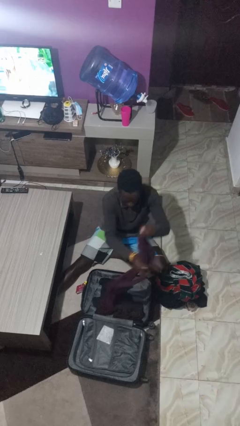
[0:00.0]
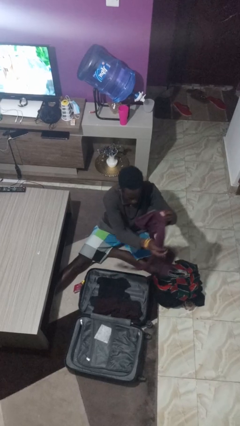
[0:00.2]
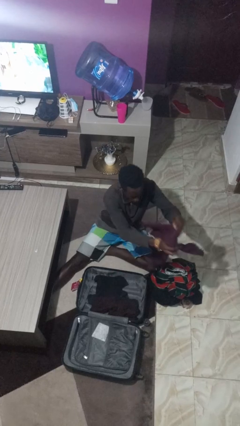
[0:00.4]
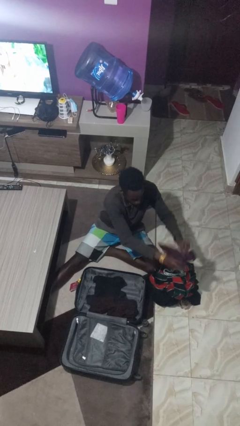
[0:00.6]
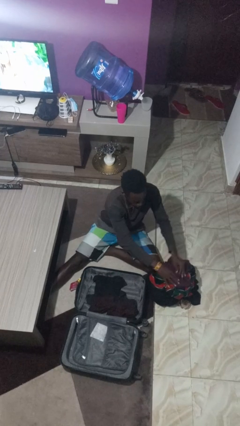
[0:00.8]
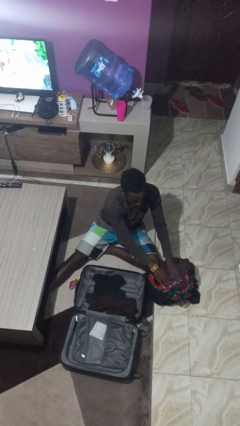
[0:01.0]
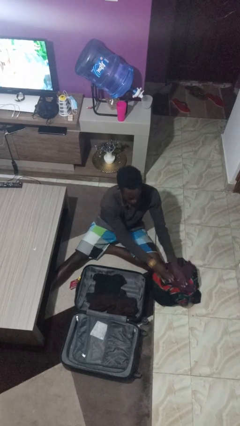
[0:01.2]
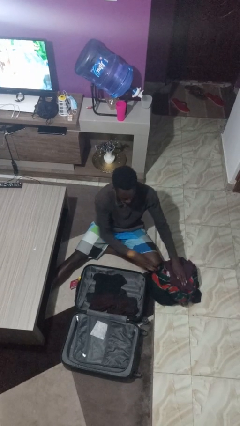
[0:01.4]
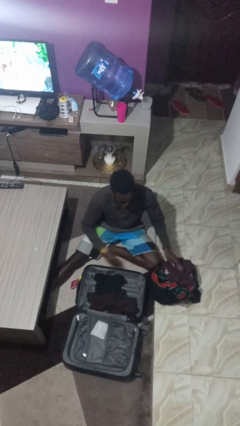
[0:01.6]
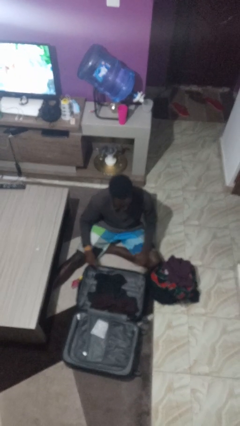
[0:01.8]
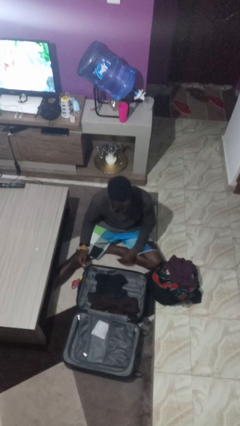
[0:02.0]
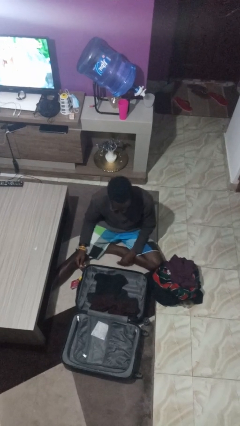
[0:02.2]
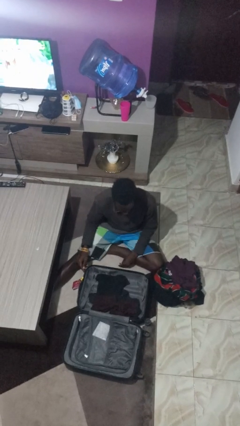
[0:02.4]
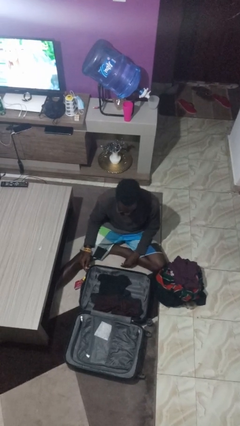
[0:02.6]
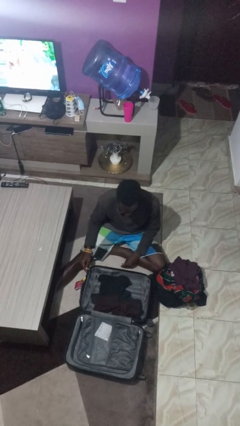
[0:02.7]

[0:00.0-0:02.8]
person unloads clothes from suitcase

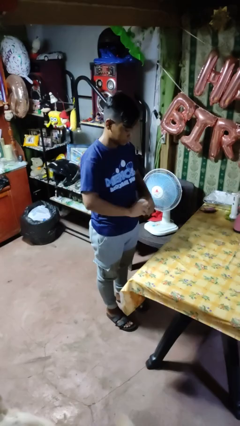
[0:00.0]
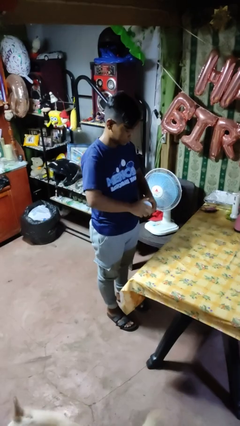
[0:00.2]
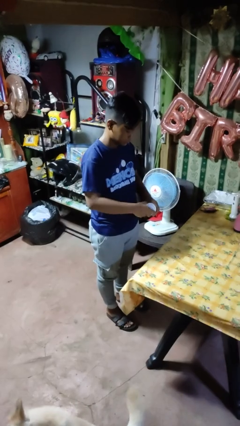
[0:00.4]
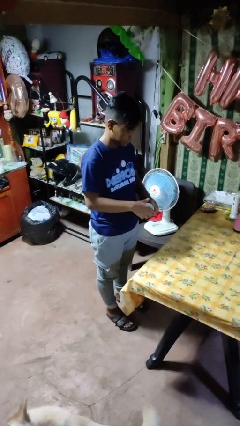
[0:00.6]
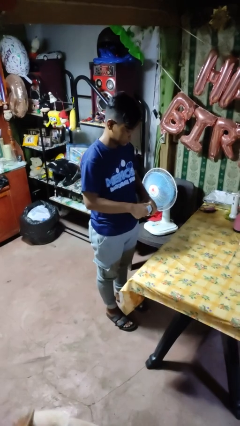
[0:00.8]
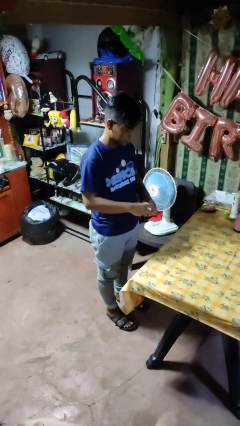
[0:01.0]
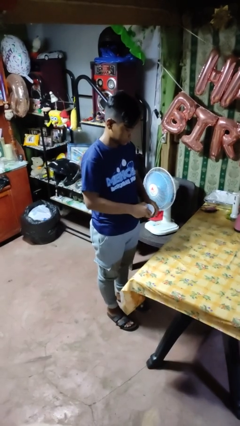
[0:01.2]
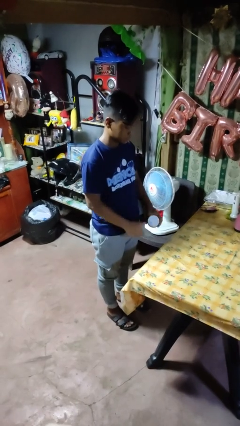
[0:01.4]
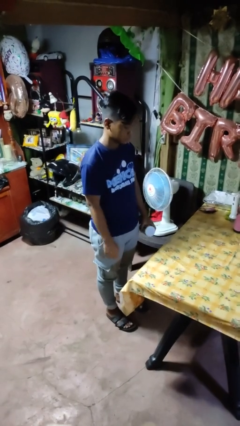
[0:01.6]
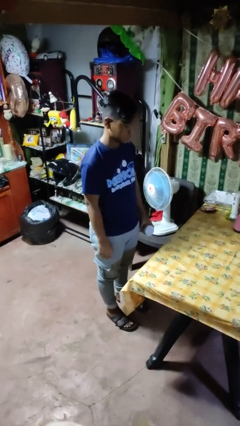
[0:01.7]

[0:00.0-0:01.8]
person closes jar

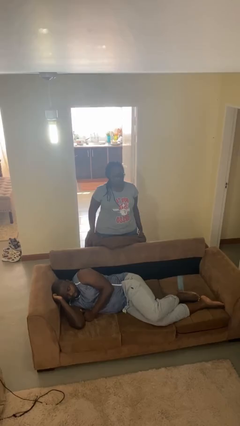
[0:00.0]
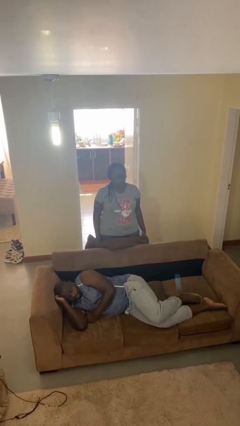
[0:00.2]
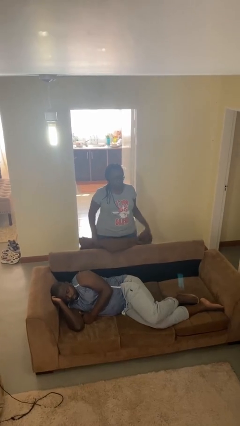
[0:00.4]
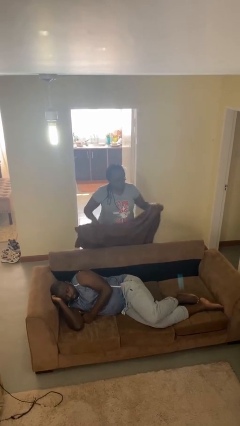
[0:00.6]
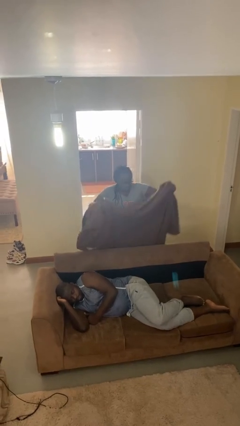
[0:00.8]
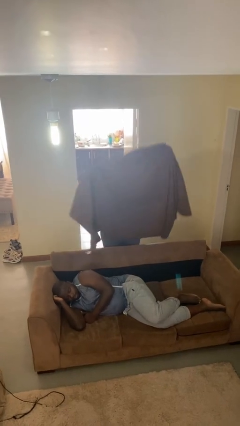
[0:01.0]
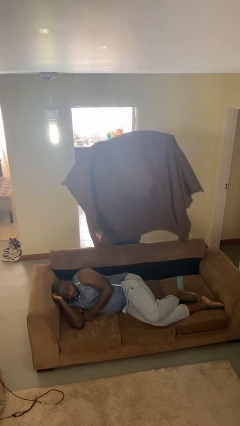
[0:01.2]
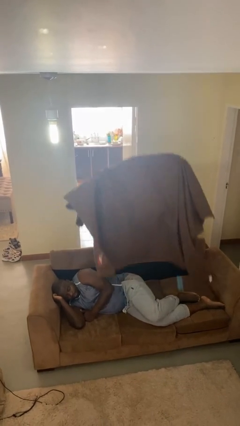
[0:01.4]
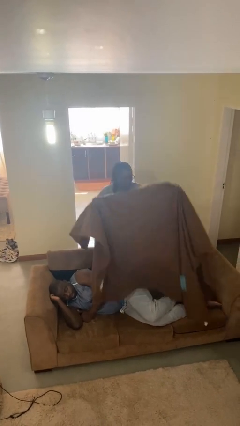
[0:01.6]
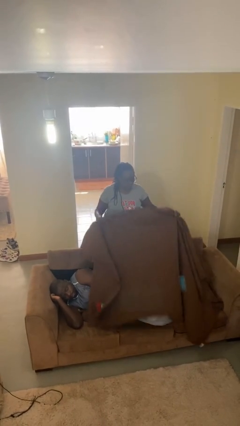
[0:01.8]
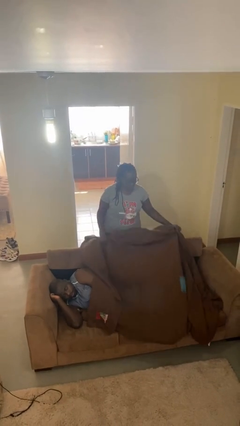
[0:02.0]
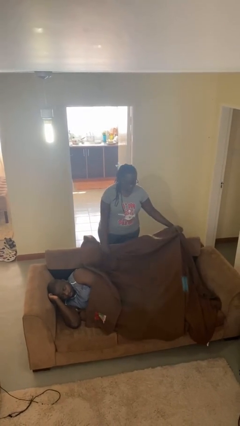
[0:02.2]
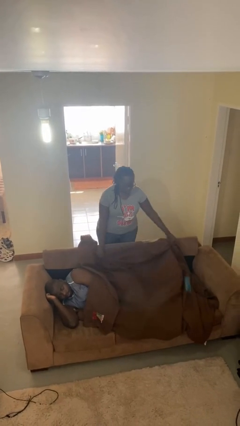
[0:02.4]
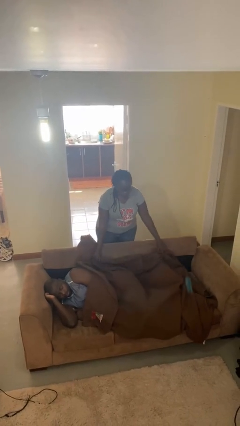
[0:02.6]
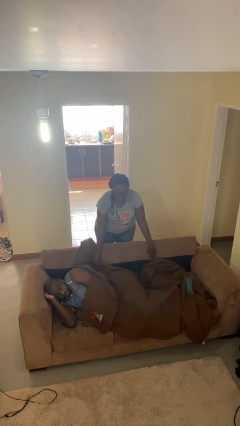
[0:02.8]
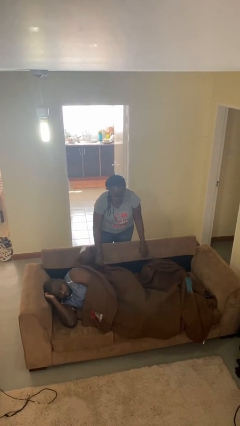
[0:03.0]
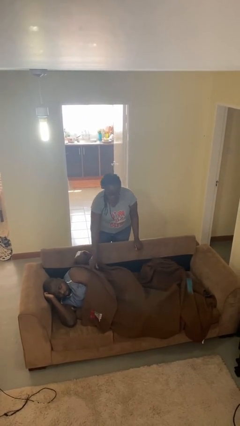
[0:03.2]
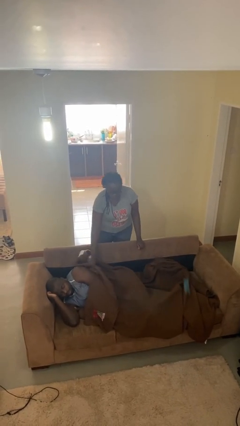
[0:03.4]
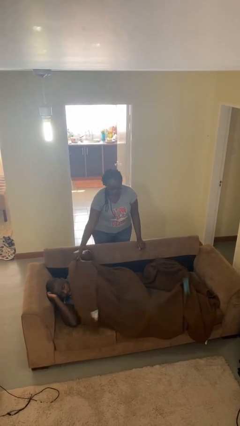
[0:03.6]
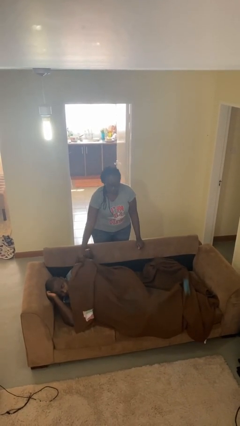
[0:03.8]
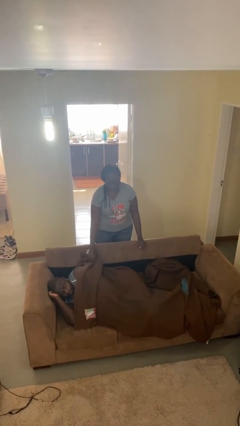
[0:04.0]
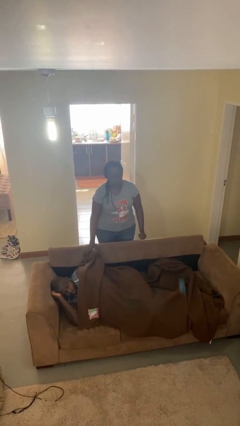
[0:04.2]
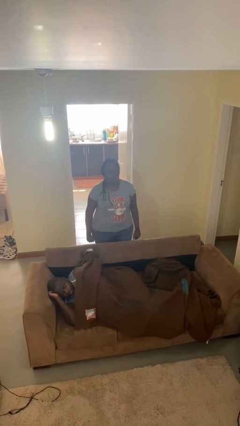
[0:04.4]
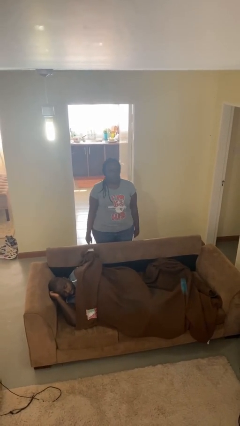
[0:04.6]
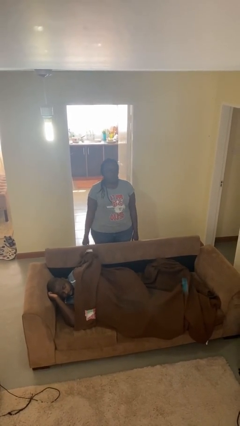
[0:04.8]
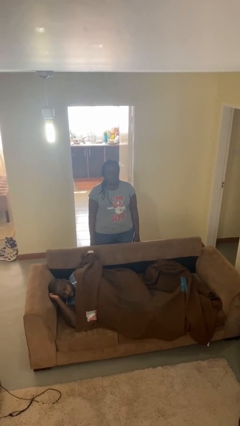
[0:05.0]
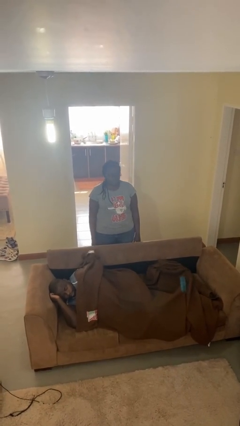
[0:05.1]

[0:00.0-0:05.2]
person covers friend with blanket

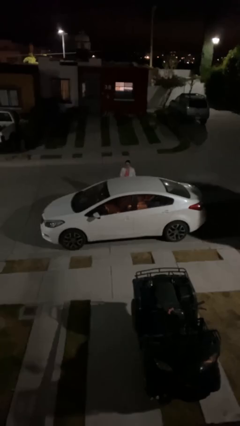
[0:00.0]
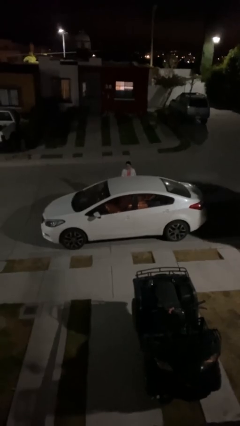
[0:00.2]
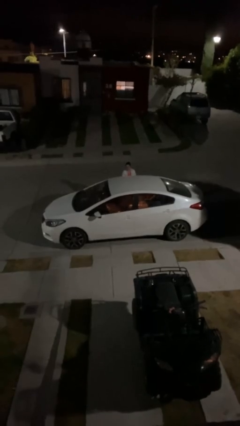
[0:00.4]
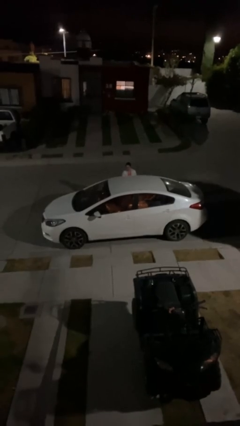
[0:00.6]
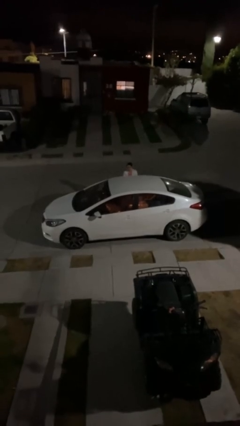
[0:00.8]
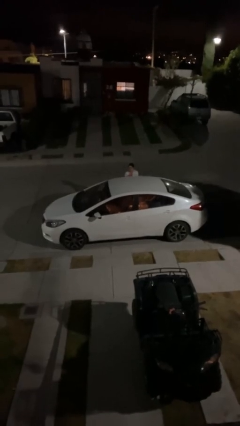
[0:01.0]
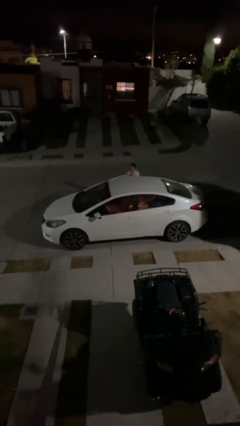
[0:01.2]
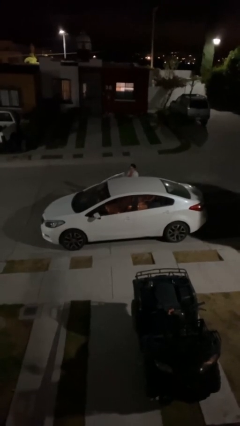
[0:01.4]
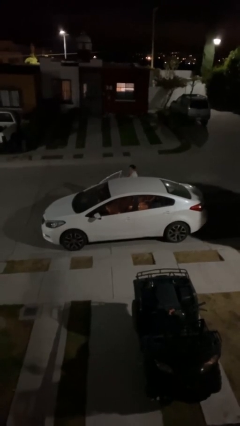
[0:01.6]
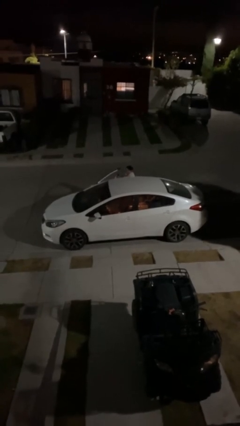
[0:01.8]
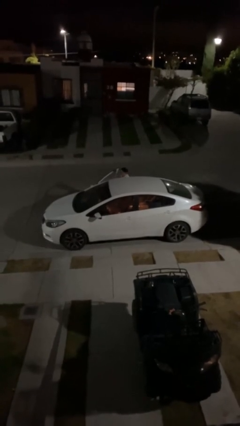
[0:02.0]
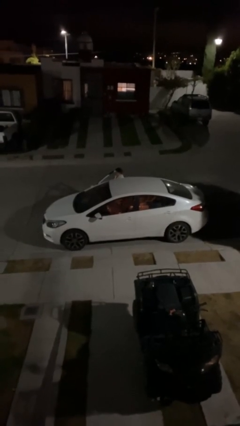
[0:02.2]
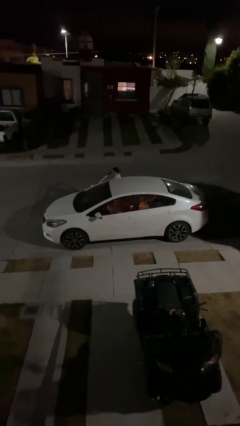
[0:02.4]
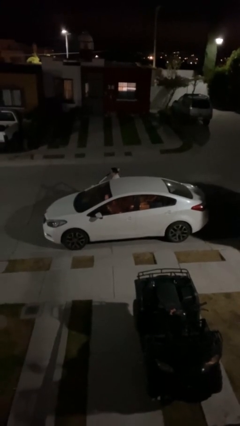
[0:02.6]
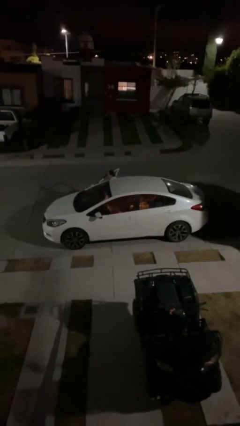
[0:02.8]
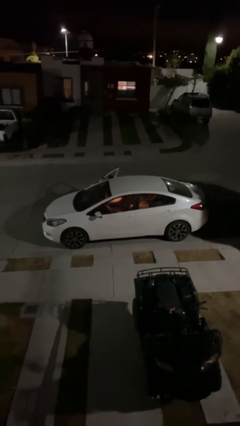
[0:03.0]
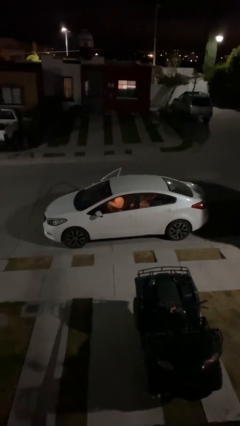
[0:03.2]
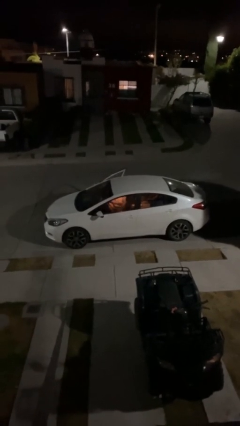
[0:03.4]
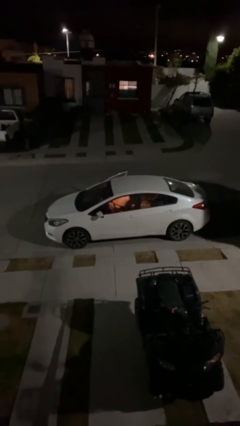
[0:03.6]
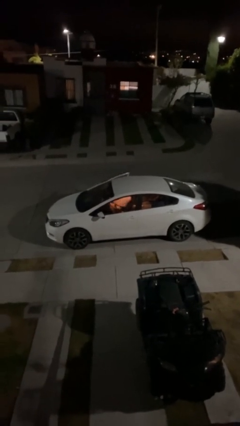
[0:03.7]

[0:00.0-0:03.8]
car picks up person

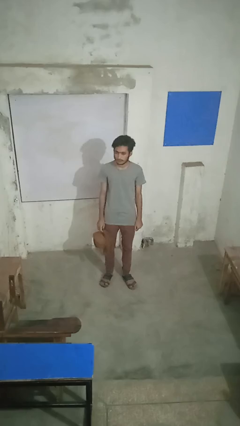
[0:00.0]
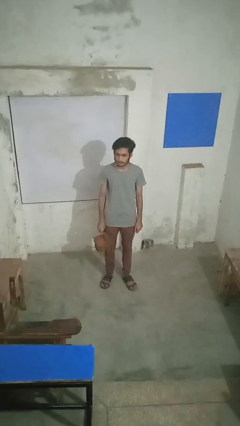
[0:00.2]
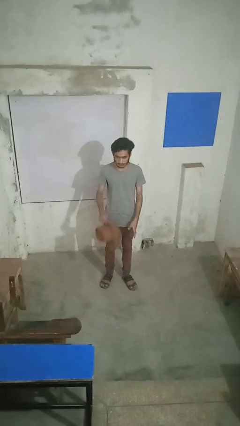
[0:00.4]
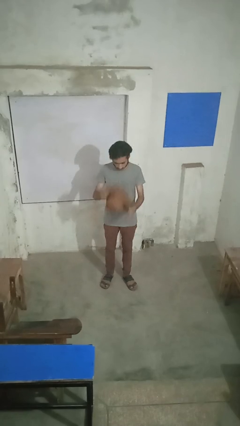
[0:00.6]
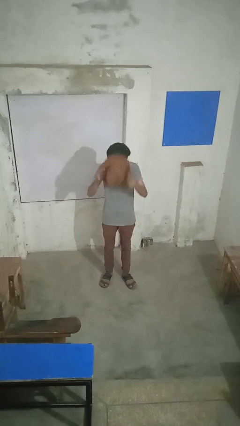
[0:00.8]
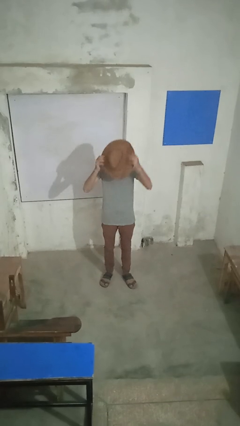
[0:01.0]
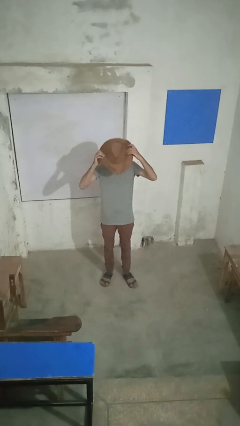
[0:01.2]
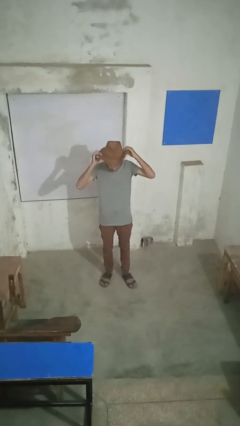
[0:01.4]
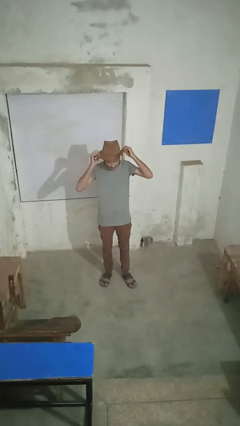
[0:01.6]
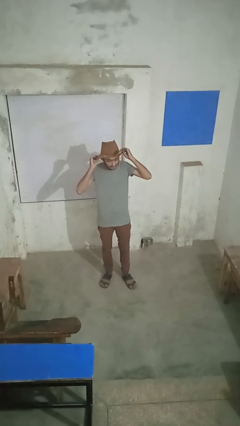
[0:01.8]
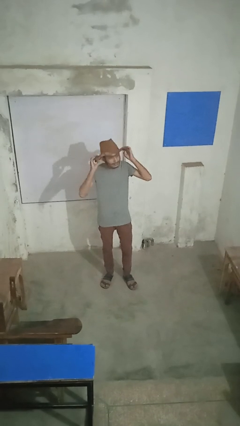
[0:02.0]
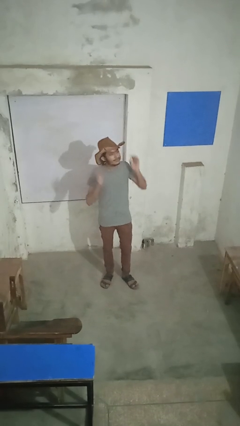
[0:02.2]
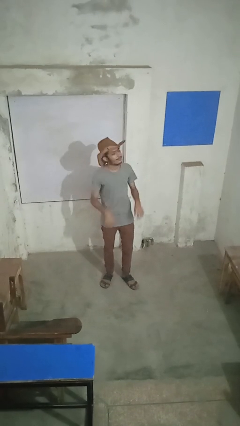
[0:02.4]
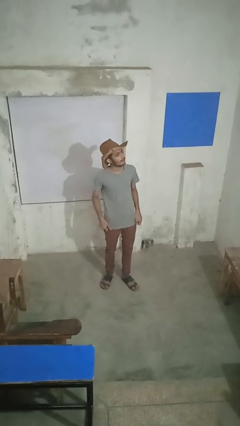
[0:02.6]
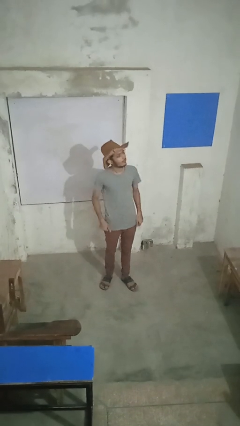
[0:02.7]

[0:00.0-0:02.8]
person puts on hat

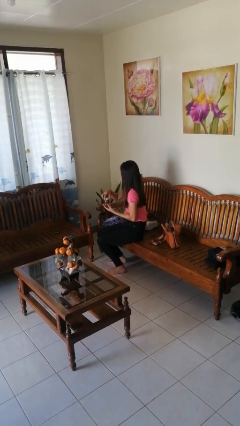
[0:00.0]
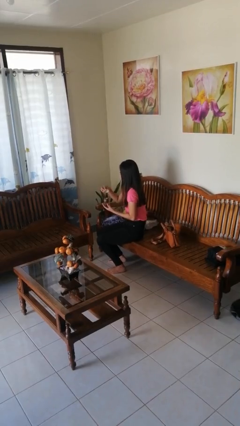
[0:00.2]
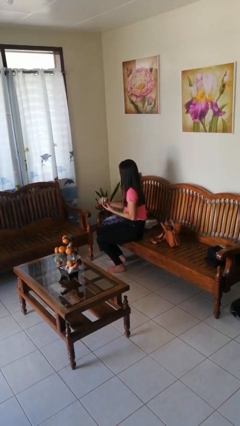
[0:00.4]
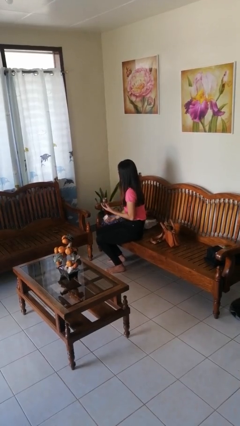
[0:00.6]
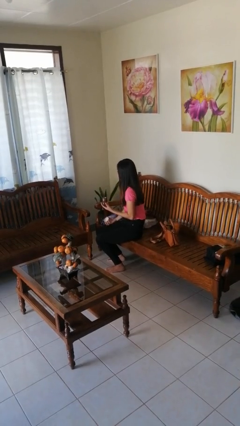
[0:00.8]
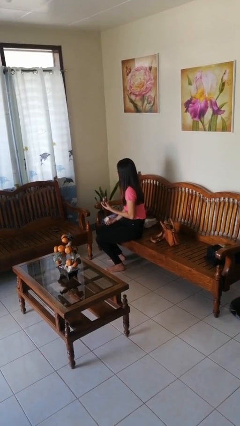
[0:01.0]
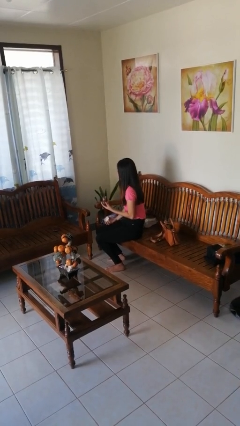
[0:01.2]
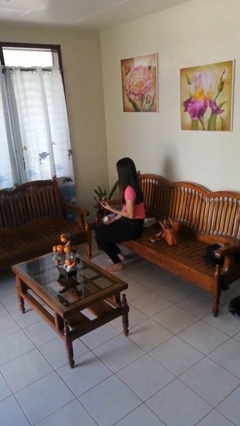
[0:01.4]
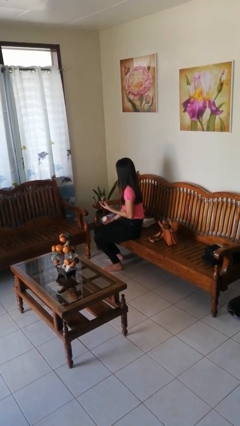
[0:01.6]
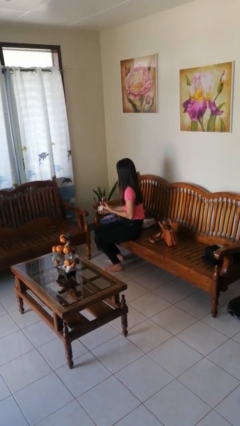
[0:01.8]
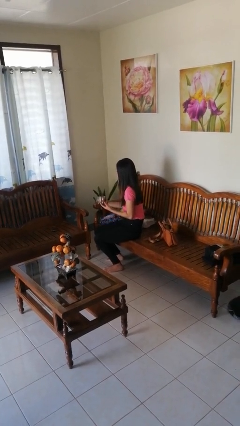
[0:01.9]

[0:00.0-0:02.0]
person opens jar
